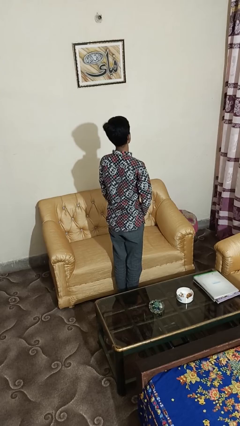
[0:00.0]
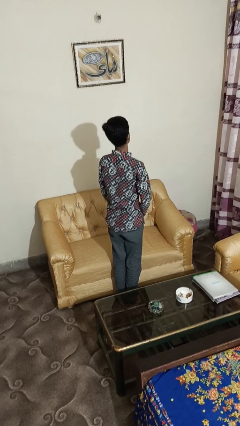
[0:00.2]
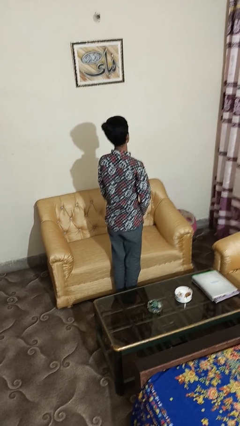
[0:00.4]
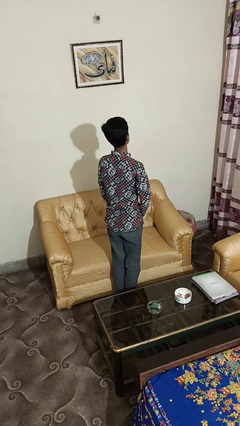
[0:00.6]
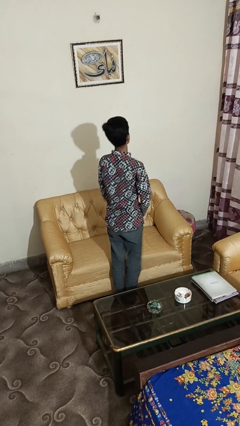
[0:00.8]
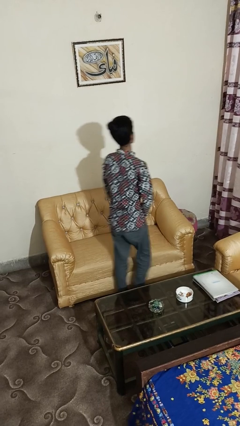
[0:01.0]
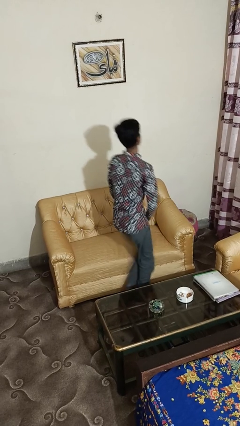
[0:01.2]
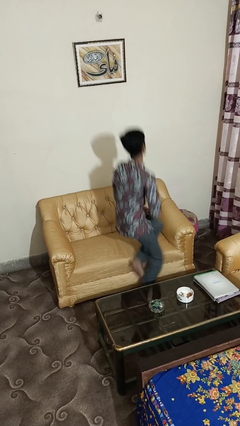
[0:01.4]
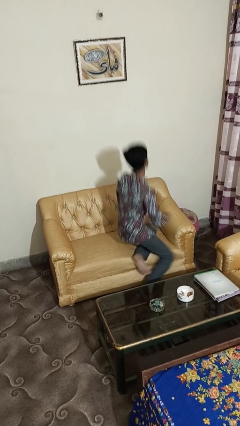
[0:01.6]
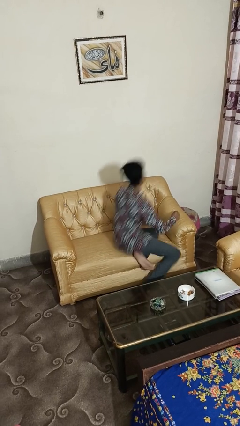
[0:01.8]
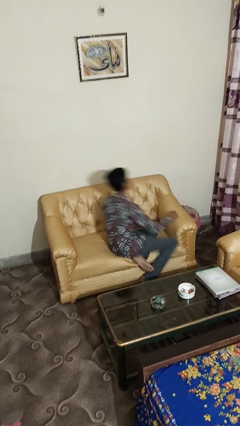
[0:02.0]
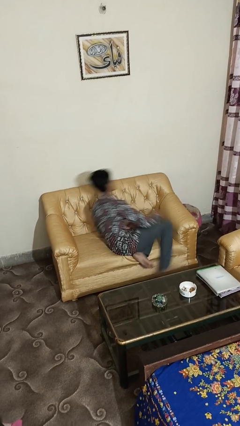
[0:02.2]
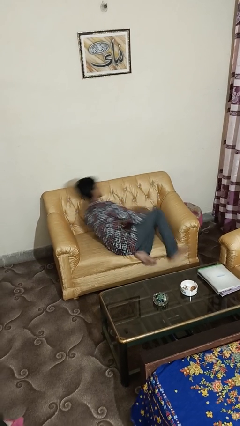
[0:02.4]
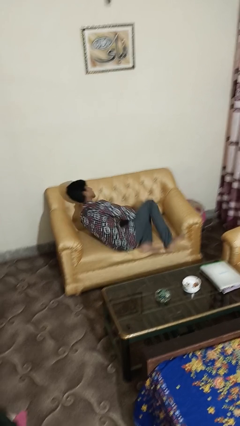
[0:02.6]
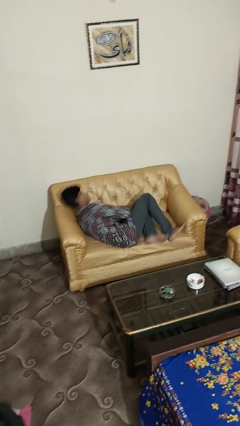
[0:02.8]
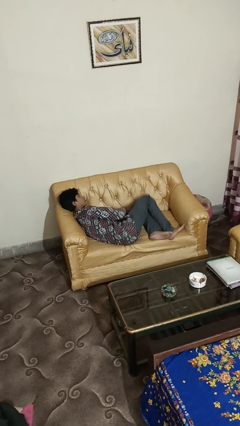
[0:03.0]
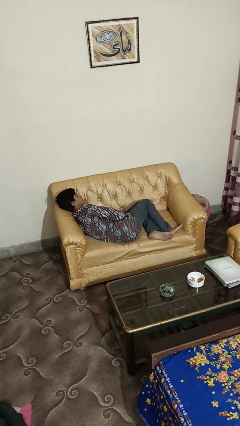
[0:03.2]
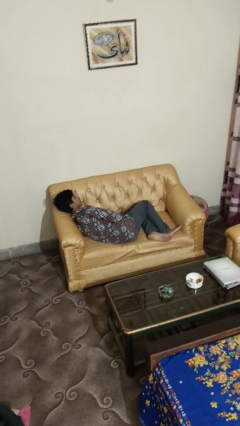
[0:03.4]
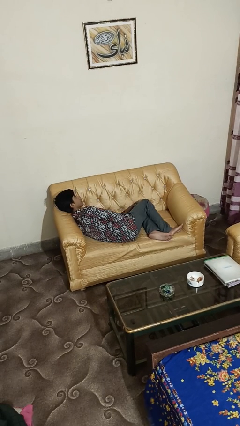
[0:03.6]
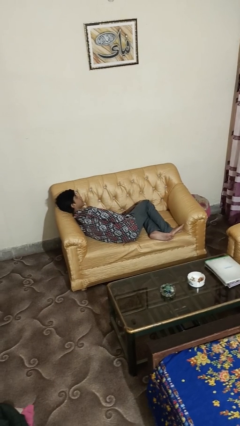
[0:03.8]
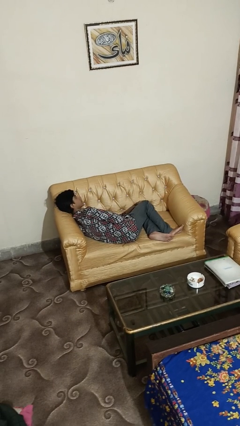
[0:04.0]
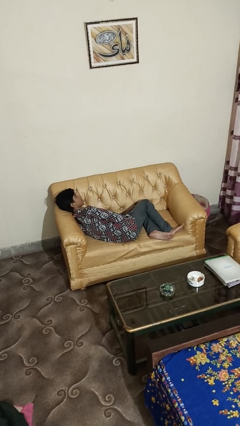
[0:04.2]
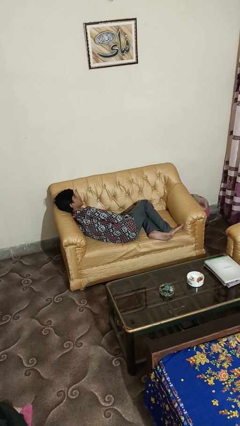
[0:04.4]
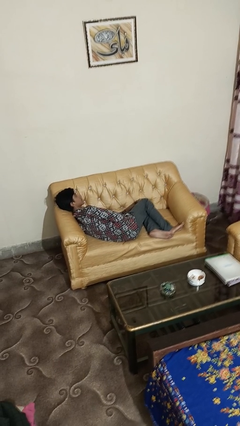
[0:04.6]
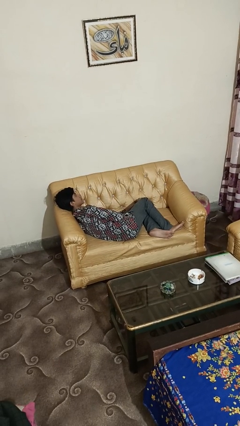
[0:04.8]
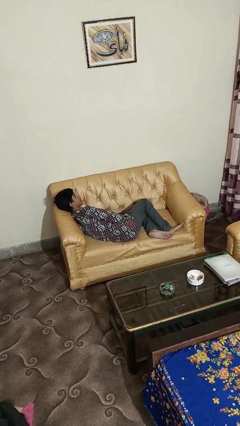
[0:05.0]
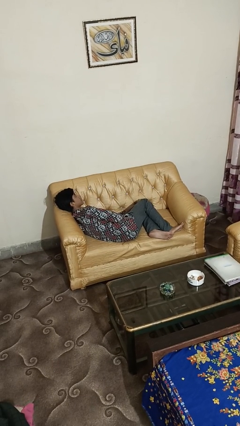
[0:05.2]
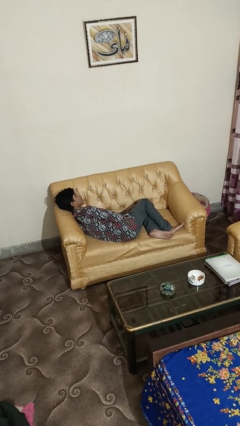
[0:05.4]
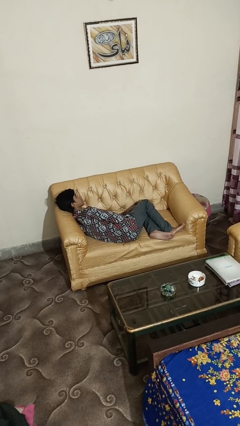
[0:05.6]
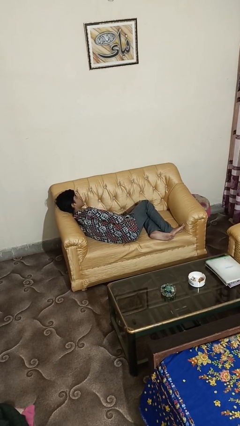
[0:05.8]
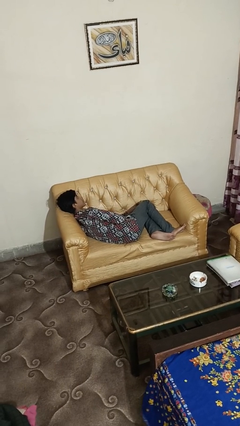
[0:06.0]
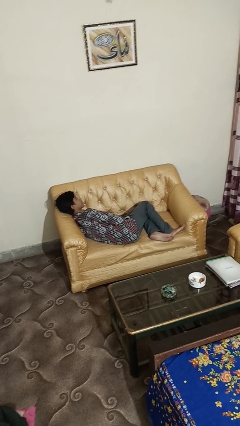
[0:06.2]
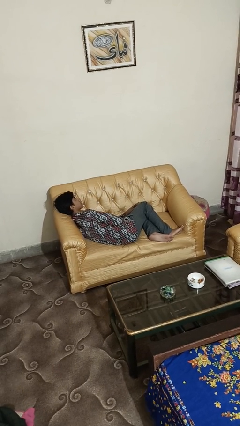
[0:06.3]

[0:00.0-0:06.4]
person lies down on couch

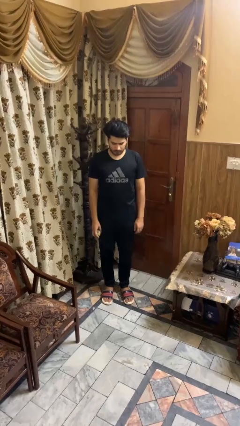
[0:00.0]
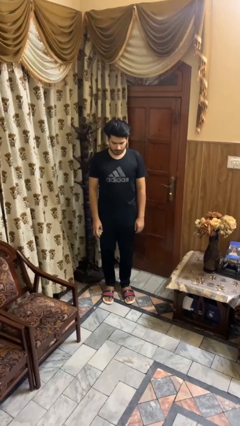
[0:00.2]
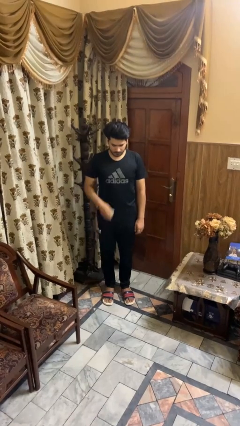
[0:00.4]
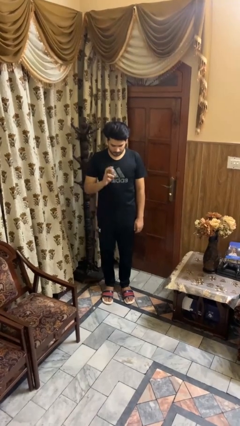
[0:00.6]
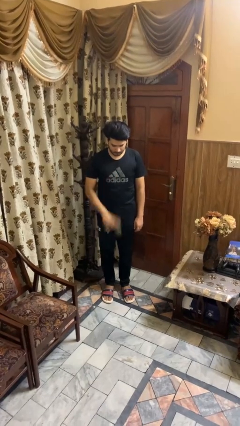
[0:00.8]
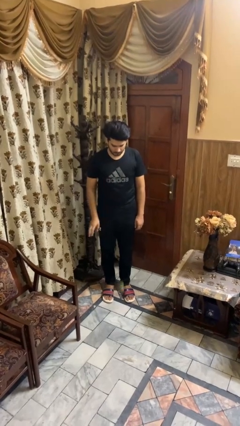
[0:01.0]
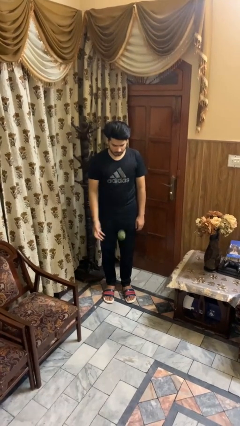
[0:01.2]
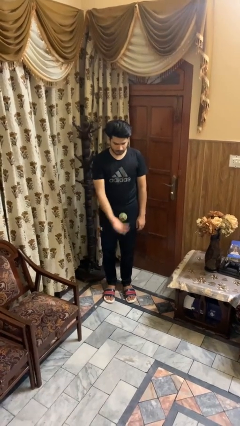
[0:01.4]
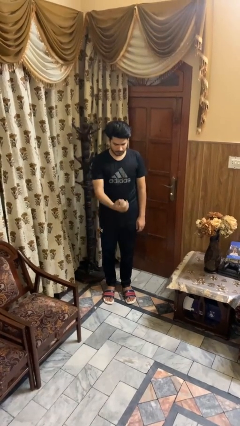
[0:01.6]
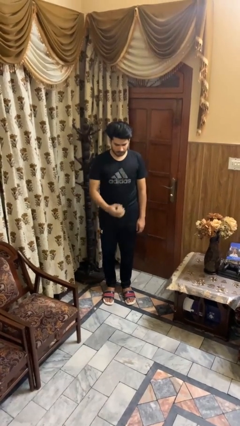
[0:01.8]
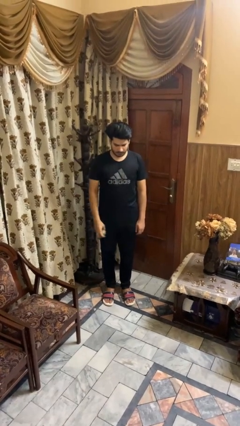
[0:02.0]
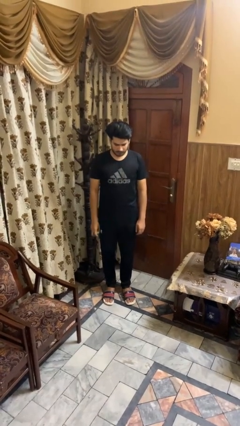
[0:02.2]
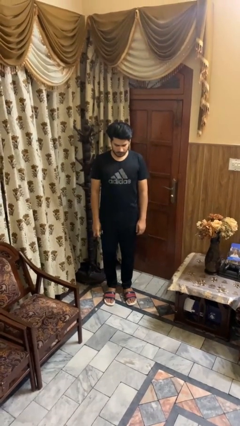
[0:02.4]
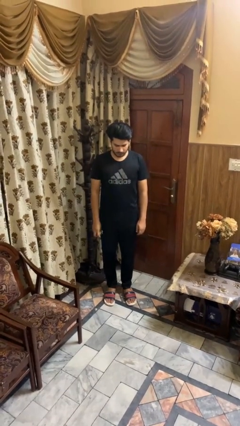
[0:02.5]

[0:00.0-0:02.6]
person bounces ball on floor

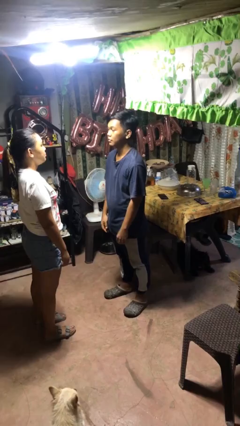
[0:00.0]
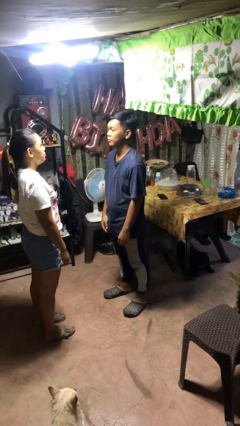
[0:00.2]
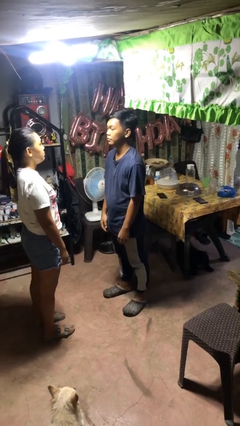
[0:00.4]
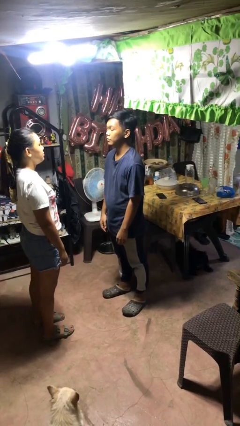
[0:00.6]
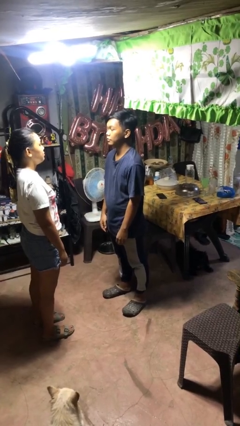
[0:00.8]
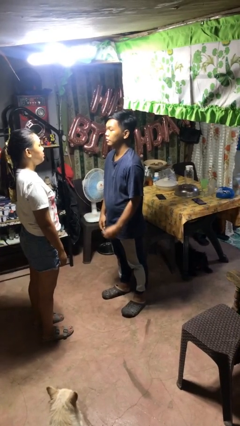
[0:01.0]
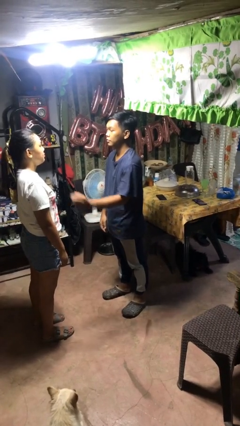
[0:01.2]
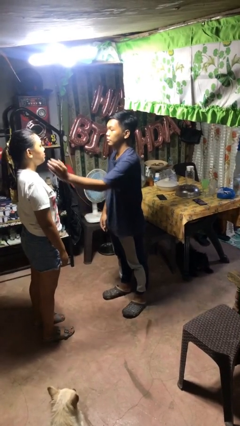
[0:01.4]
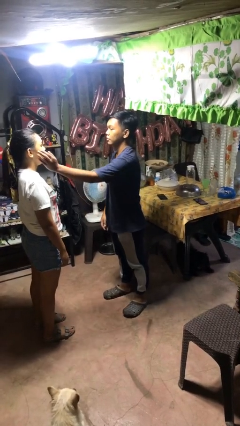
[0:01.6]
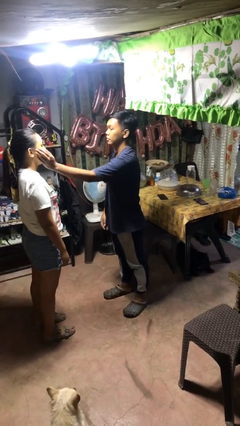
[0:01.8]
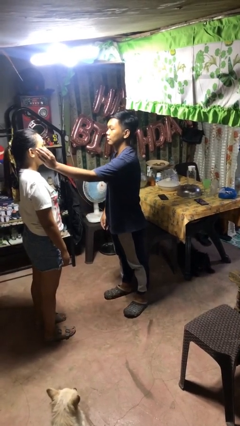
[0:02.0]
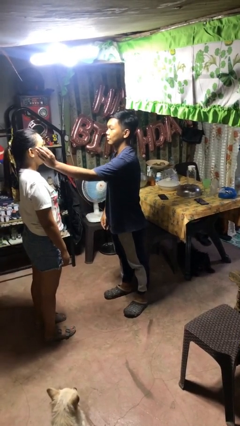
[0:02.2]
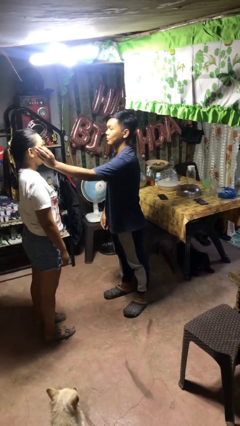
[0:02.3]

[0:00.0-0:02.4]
person touches face of person

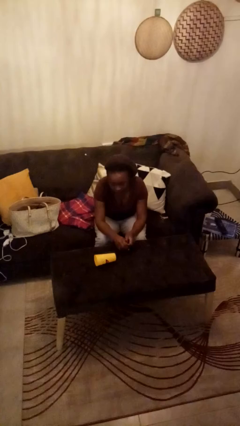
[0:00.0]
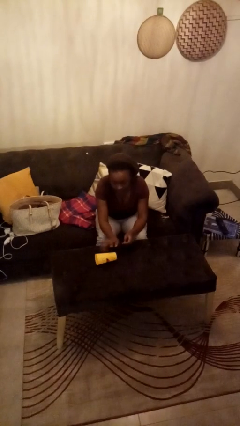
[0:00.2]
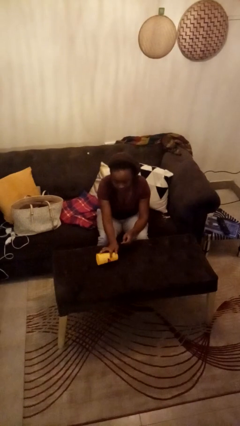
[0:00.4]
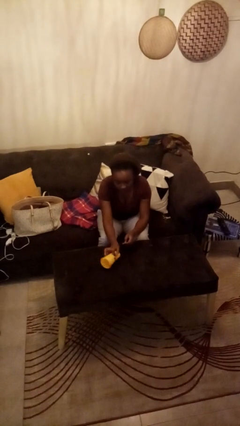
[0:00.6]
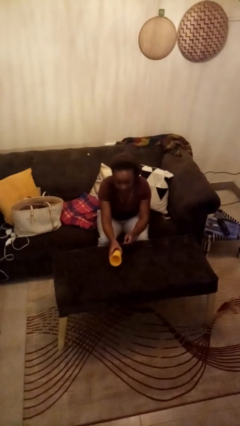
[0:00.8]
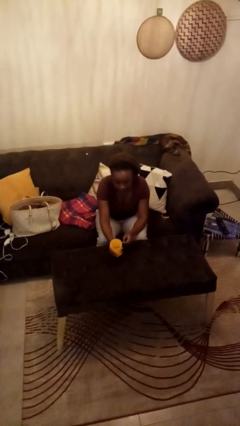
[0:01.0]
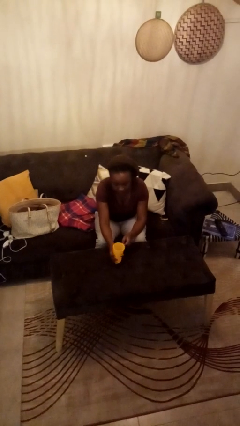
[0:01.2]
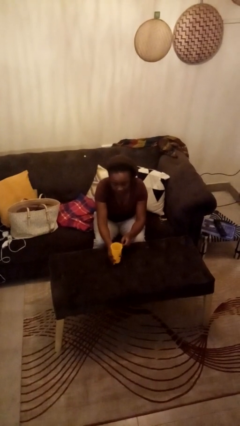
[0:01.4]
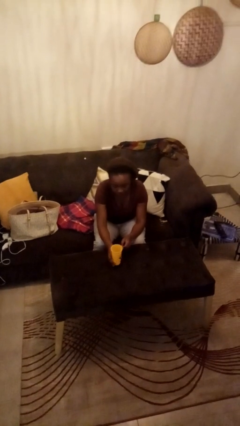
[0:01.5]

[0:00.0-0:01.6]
person sets upright glass

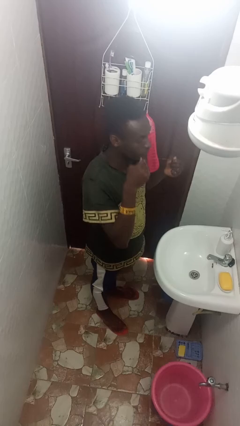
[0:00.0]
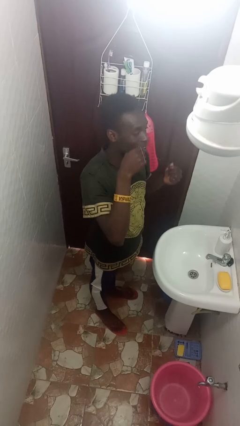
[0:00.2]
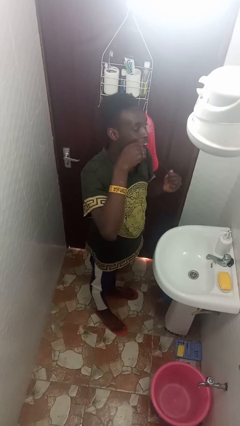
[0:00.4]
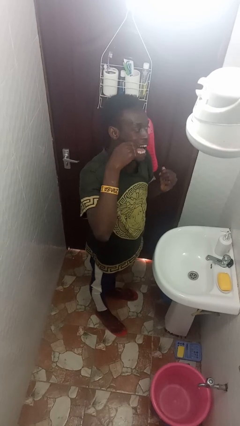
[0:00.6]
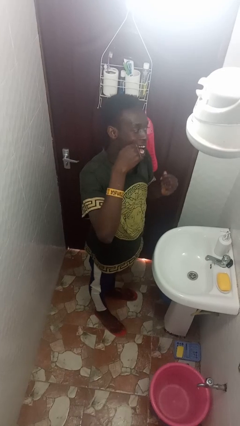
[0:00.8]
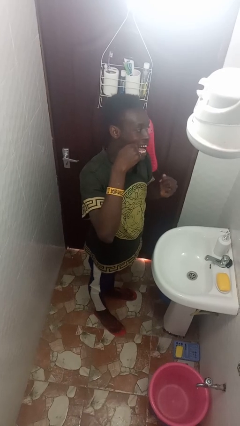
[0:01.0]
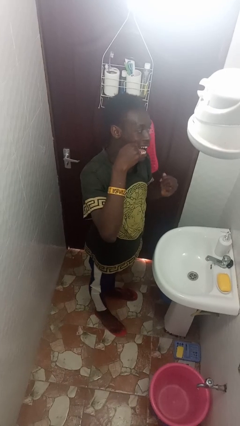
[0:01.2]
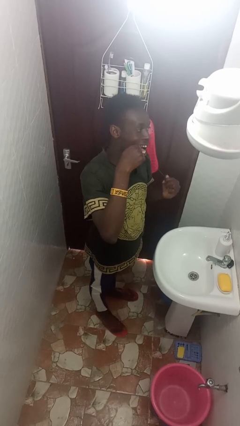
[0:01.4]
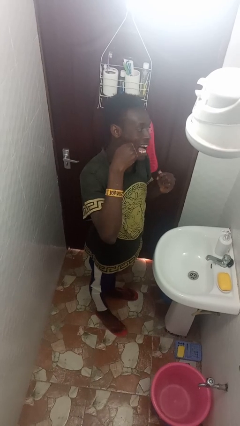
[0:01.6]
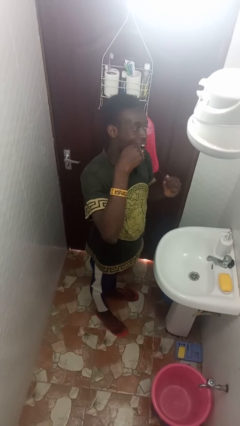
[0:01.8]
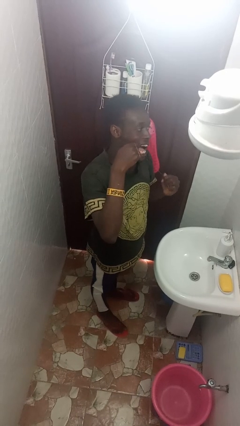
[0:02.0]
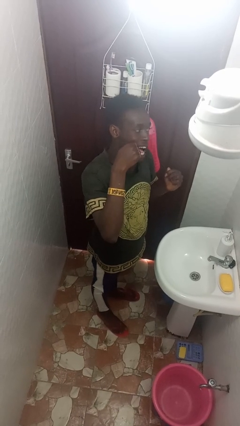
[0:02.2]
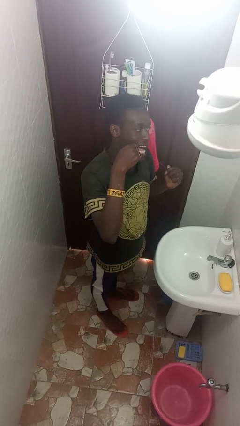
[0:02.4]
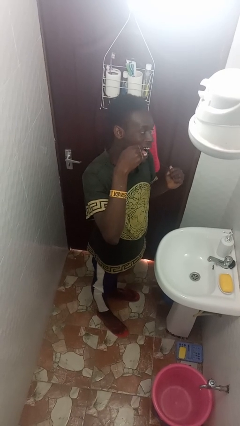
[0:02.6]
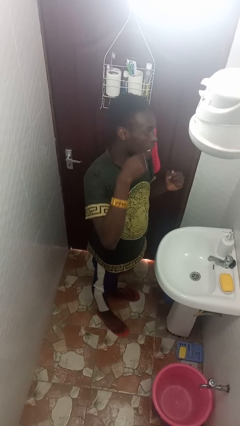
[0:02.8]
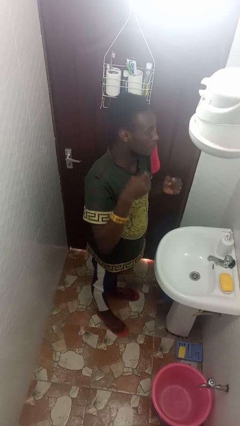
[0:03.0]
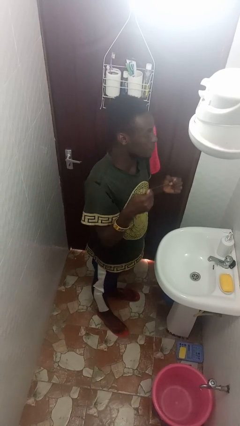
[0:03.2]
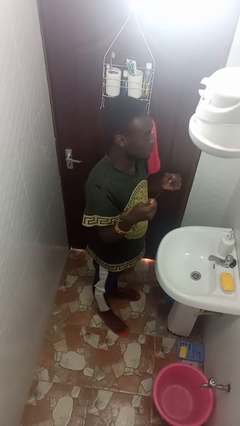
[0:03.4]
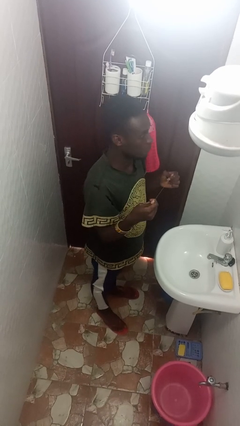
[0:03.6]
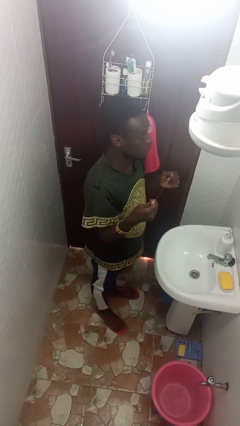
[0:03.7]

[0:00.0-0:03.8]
person flosses

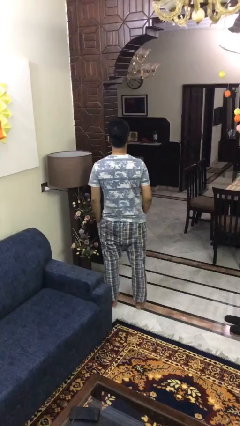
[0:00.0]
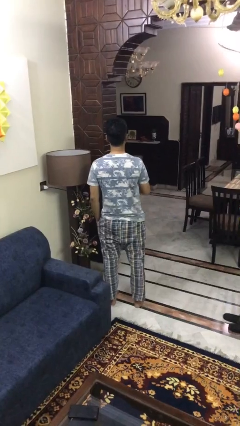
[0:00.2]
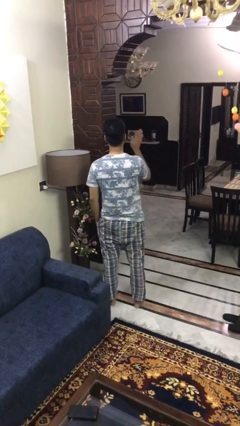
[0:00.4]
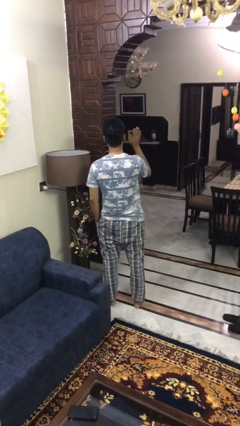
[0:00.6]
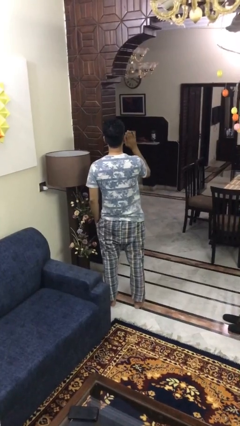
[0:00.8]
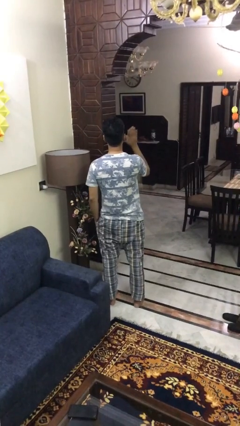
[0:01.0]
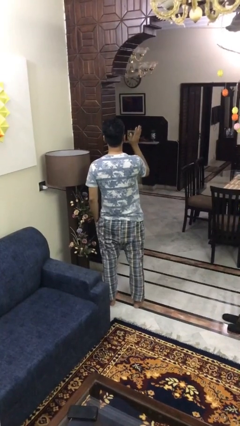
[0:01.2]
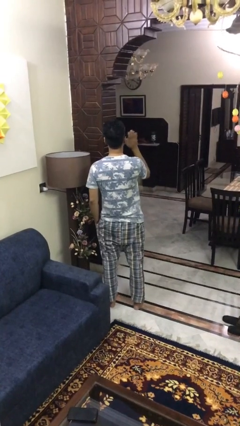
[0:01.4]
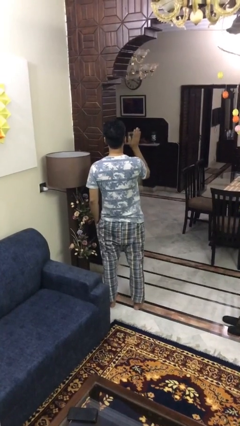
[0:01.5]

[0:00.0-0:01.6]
person waves at person
